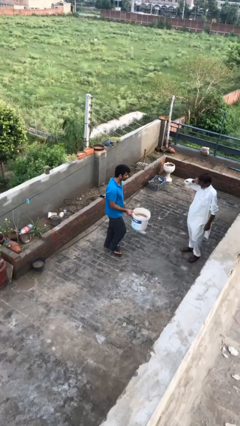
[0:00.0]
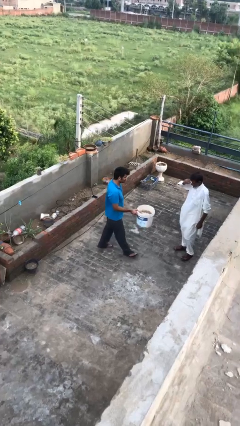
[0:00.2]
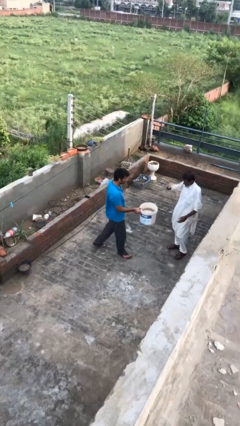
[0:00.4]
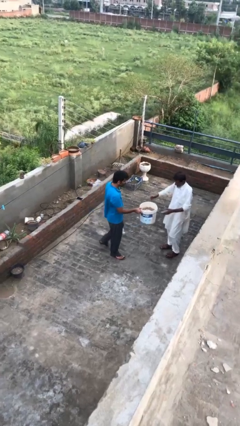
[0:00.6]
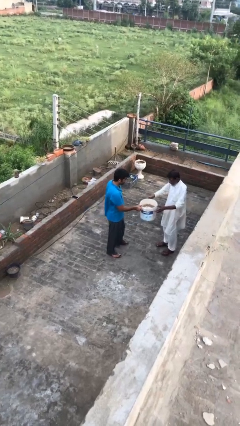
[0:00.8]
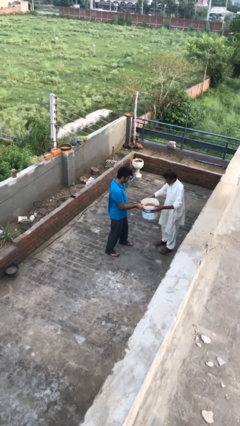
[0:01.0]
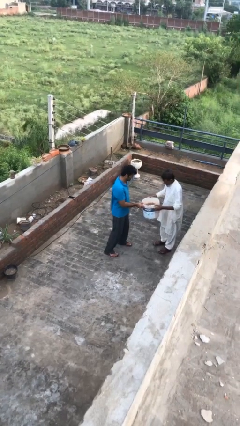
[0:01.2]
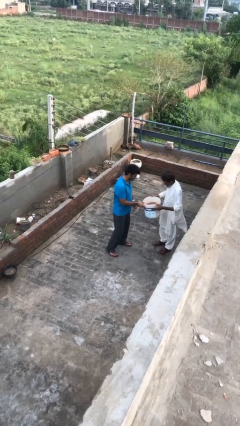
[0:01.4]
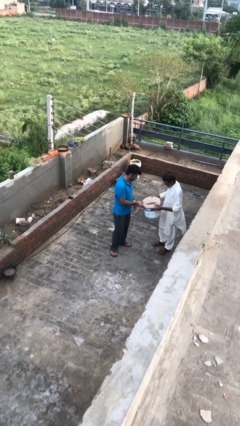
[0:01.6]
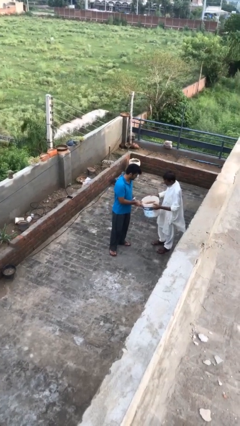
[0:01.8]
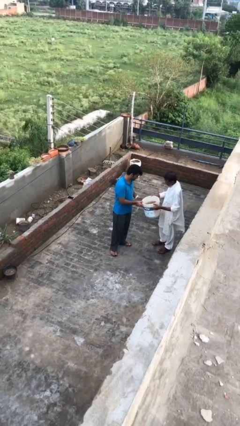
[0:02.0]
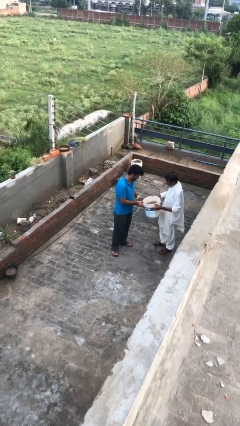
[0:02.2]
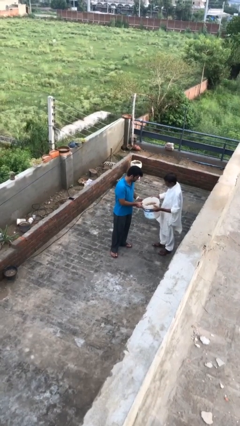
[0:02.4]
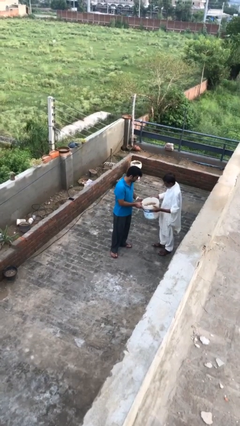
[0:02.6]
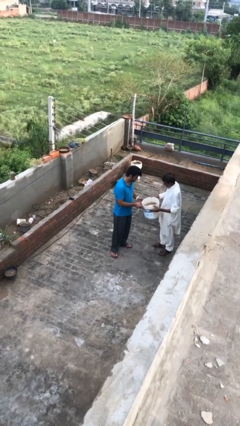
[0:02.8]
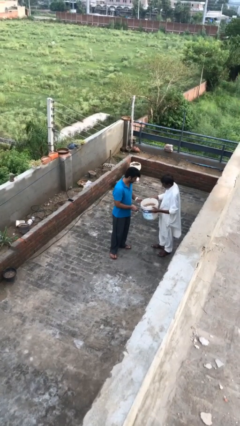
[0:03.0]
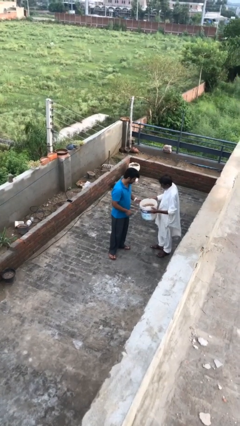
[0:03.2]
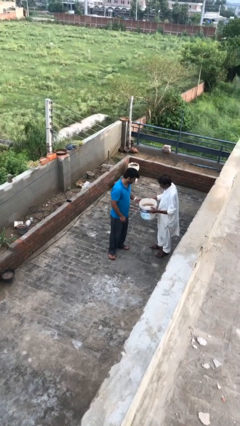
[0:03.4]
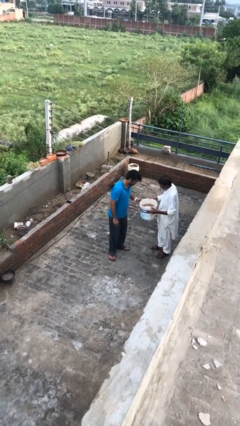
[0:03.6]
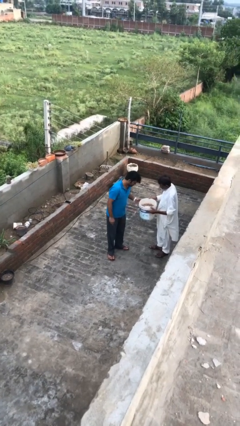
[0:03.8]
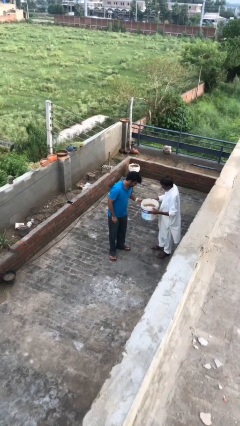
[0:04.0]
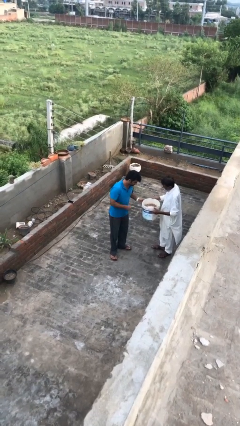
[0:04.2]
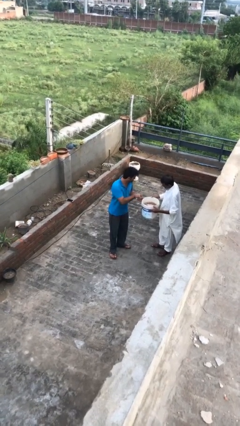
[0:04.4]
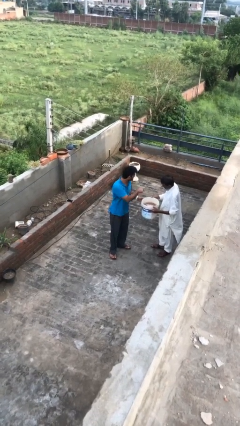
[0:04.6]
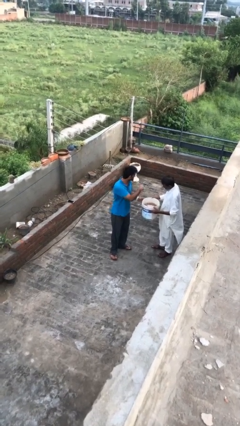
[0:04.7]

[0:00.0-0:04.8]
person transfers object to person

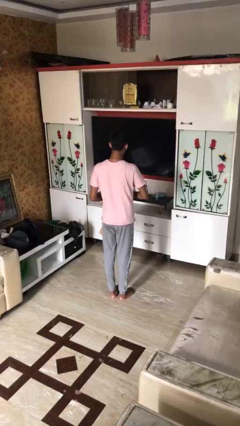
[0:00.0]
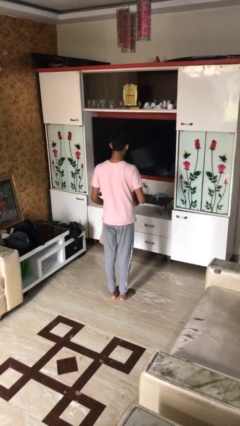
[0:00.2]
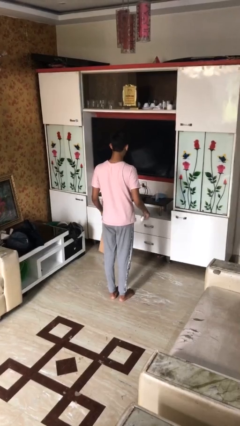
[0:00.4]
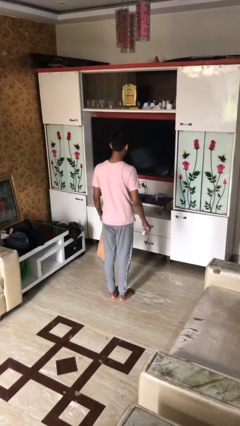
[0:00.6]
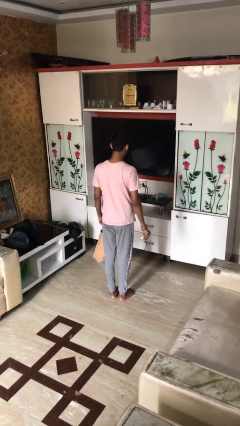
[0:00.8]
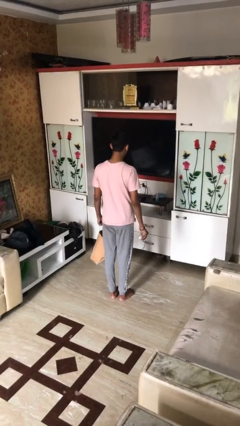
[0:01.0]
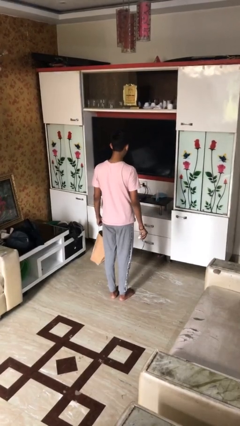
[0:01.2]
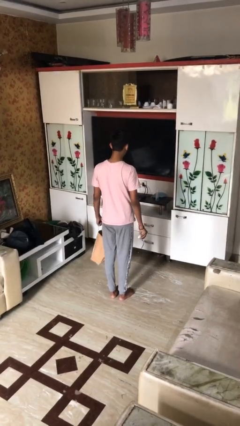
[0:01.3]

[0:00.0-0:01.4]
person takes object from bag

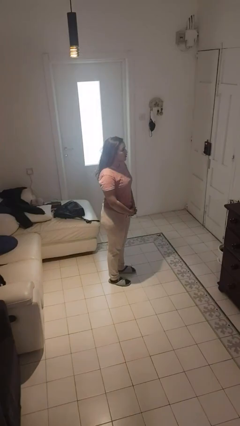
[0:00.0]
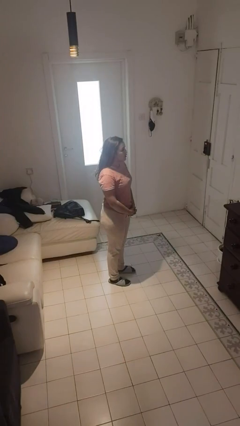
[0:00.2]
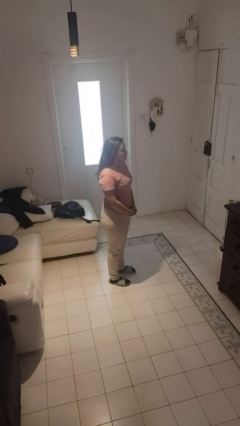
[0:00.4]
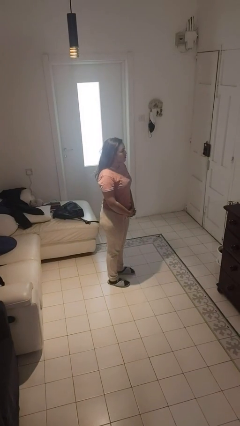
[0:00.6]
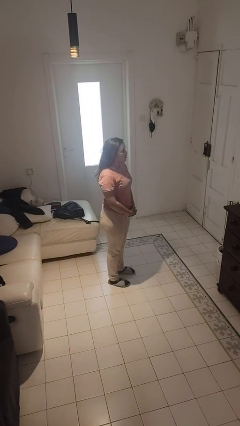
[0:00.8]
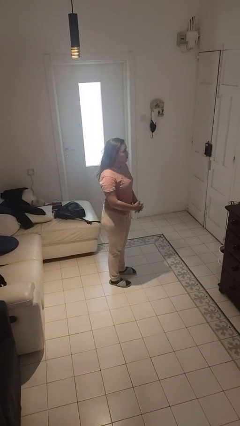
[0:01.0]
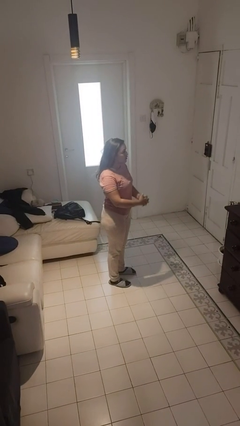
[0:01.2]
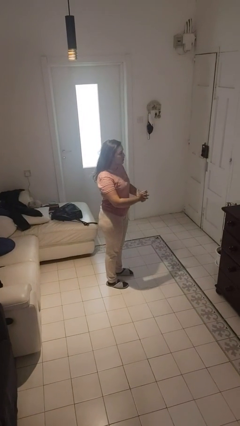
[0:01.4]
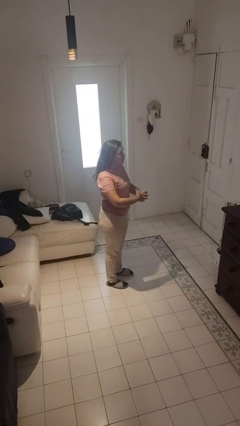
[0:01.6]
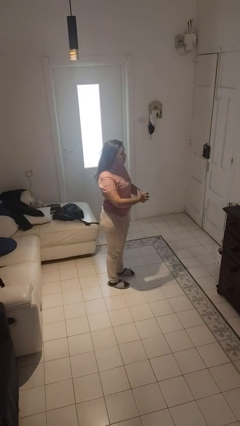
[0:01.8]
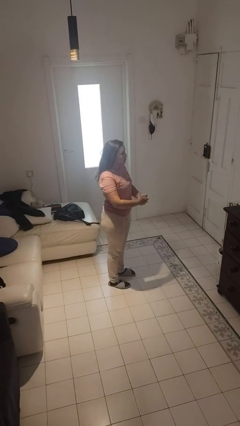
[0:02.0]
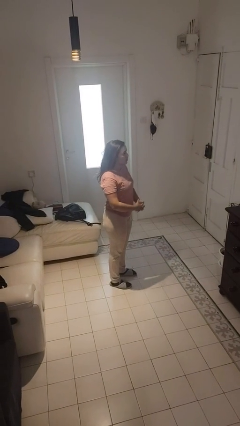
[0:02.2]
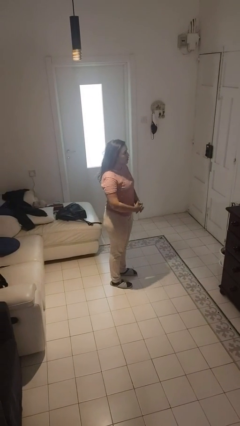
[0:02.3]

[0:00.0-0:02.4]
person cracks knuckles

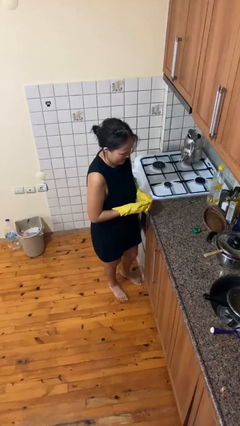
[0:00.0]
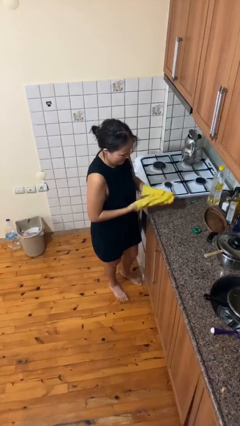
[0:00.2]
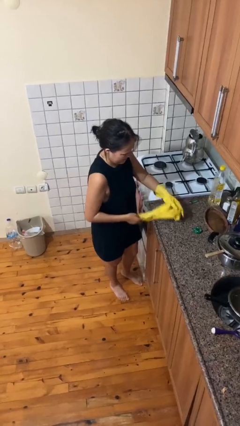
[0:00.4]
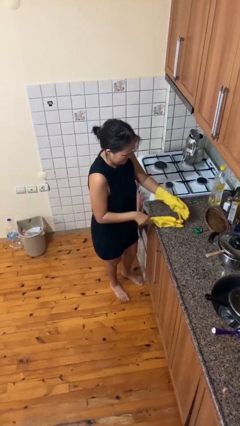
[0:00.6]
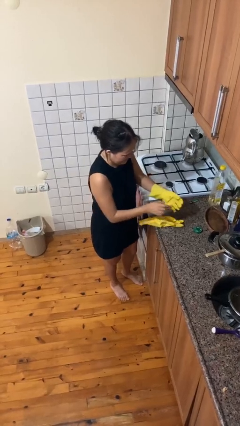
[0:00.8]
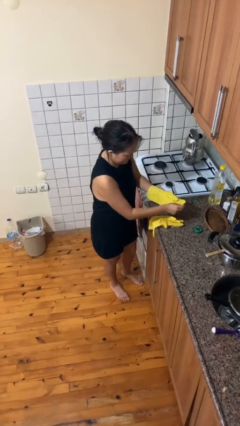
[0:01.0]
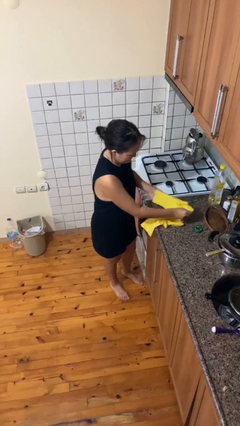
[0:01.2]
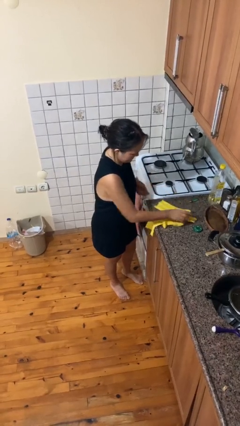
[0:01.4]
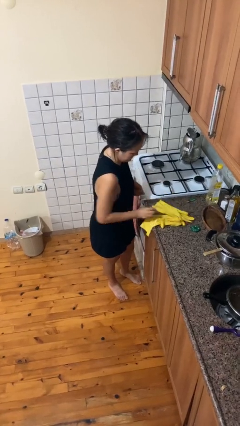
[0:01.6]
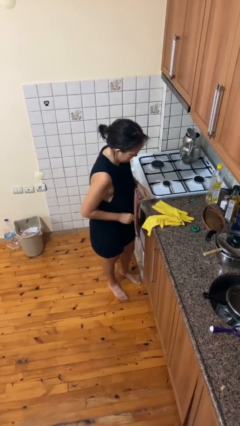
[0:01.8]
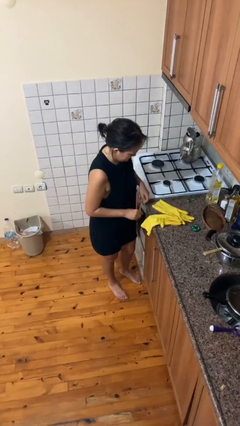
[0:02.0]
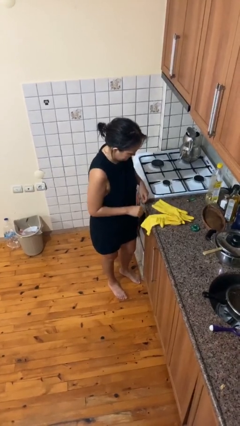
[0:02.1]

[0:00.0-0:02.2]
person takes off gloves

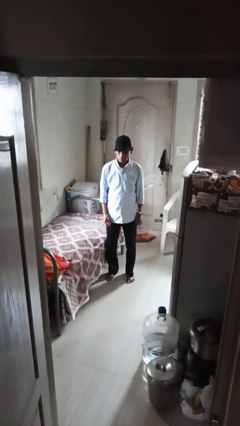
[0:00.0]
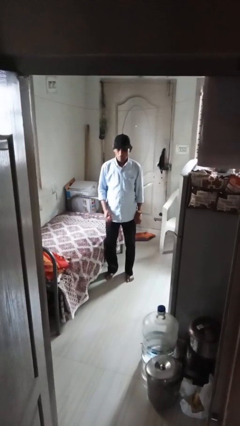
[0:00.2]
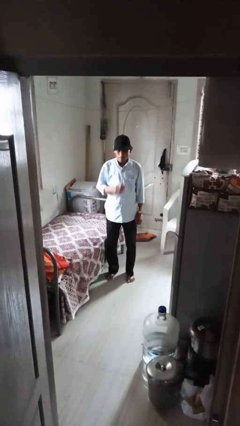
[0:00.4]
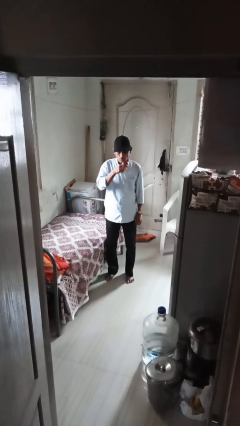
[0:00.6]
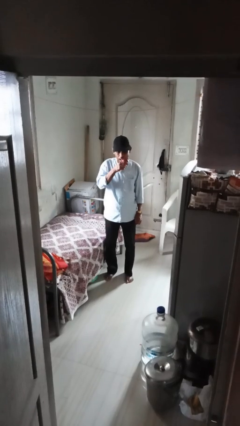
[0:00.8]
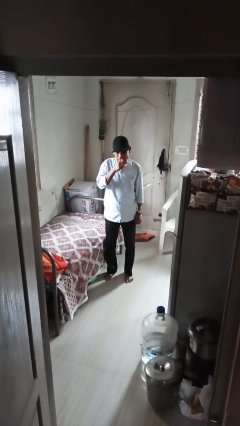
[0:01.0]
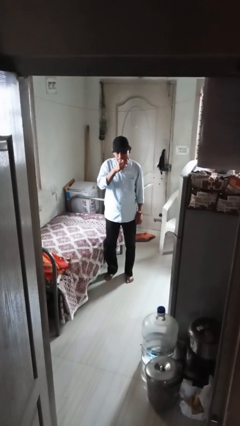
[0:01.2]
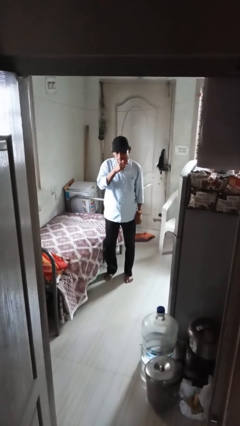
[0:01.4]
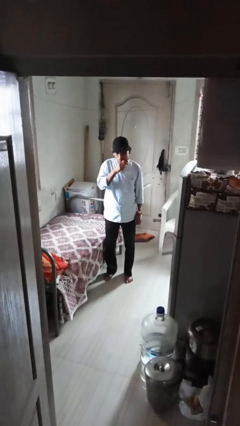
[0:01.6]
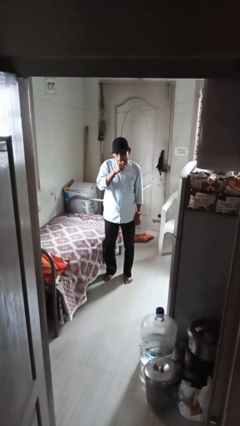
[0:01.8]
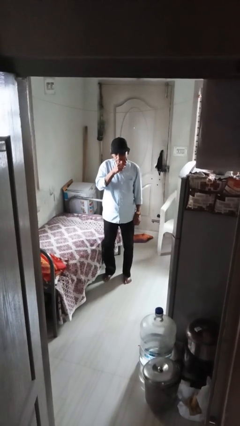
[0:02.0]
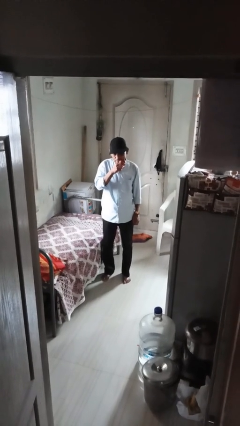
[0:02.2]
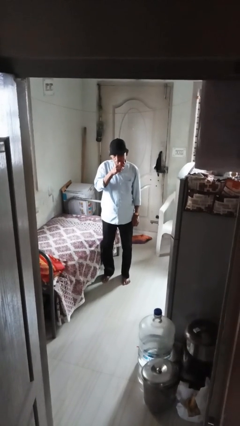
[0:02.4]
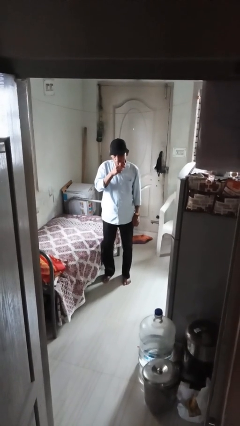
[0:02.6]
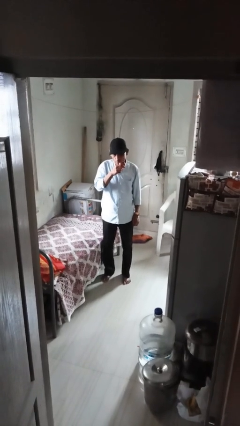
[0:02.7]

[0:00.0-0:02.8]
person eats apple

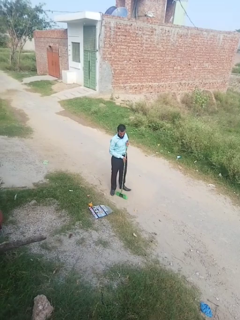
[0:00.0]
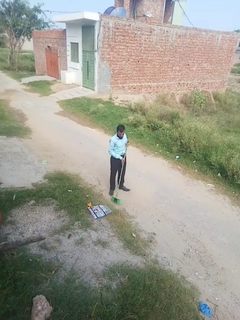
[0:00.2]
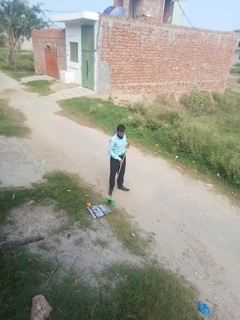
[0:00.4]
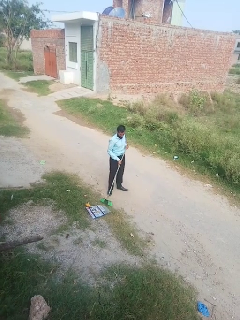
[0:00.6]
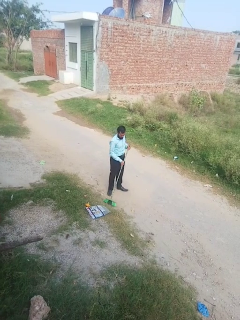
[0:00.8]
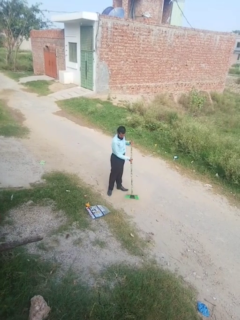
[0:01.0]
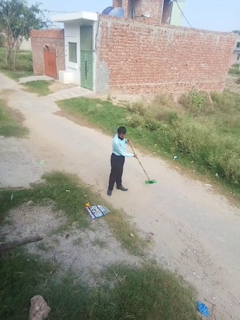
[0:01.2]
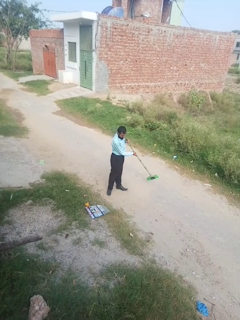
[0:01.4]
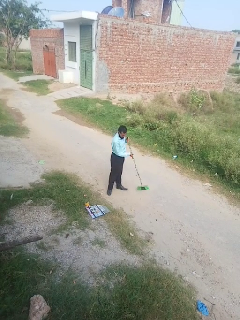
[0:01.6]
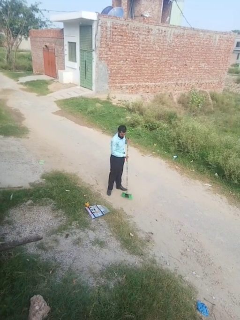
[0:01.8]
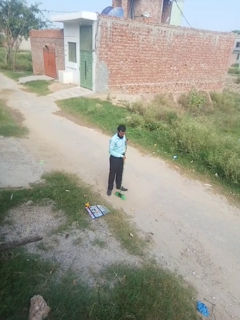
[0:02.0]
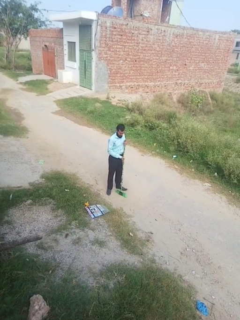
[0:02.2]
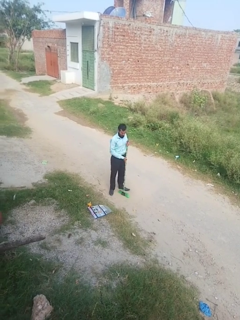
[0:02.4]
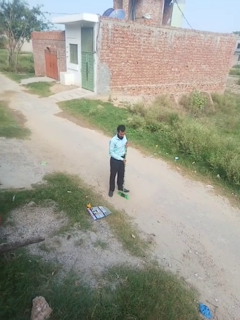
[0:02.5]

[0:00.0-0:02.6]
person sweeps floor

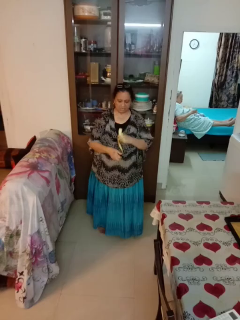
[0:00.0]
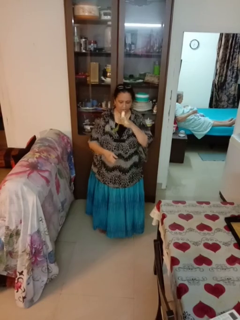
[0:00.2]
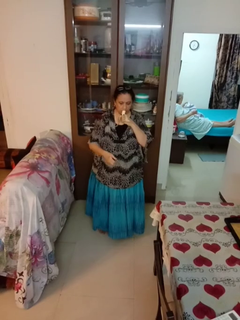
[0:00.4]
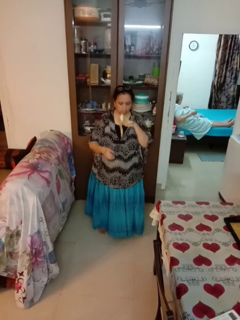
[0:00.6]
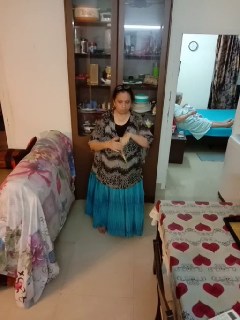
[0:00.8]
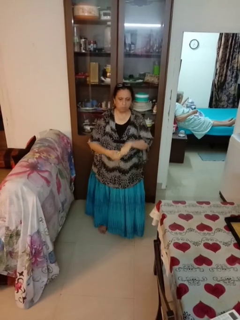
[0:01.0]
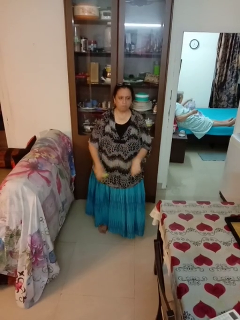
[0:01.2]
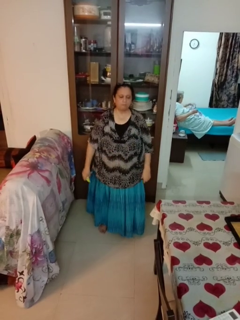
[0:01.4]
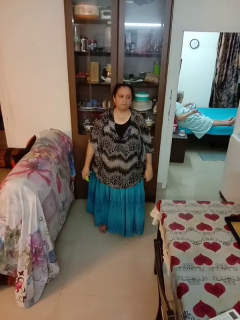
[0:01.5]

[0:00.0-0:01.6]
person eats banana

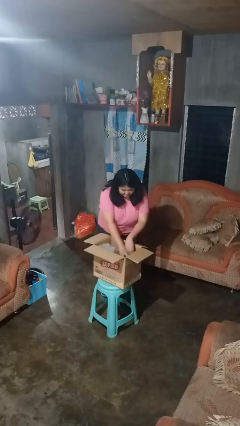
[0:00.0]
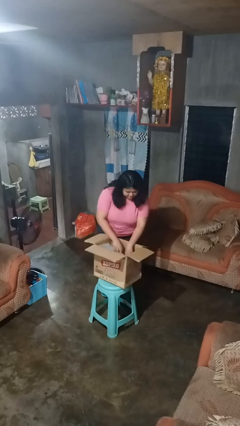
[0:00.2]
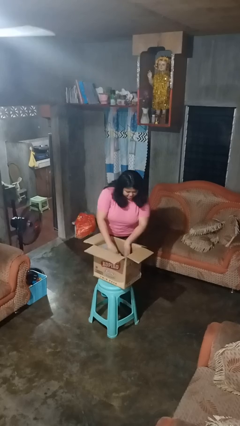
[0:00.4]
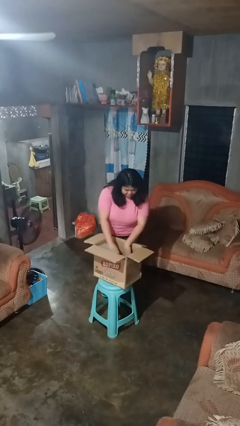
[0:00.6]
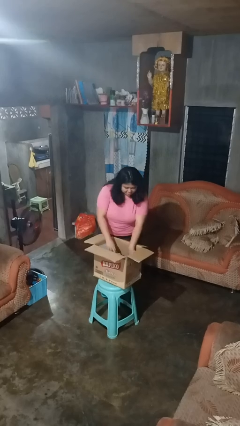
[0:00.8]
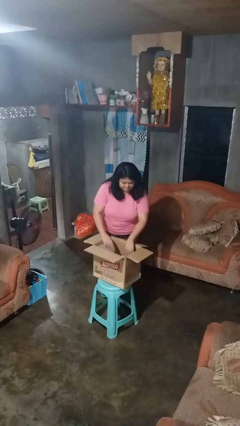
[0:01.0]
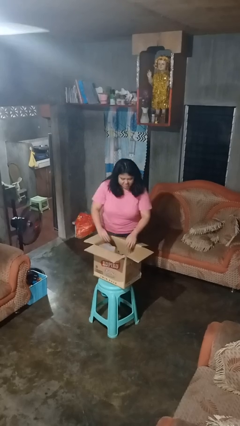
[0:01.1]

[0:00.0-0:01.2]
person searches in box
